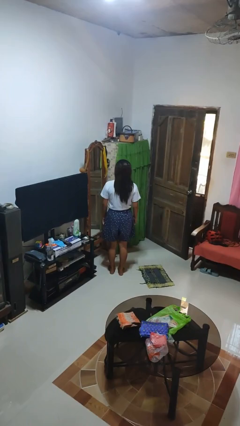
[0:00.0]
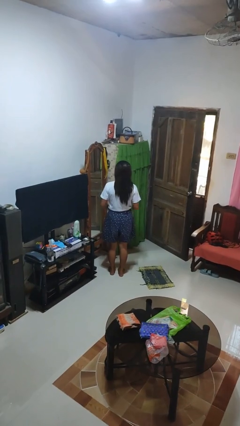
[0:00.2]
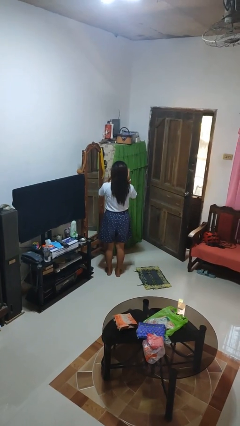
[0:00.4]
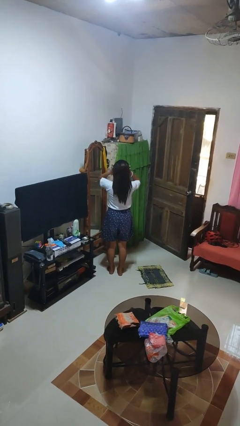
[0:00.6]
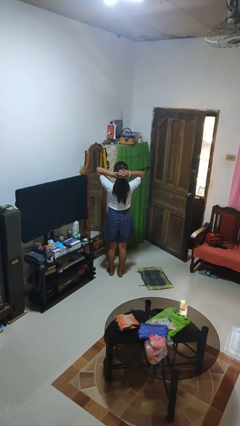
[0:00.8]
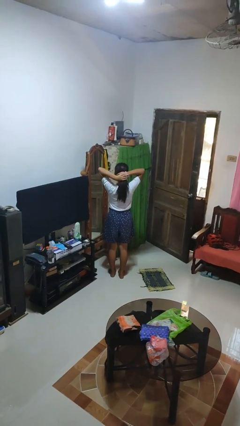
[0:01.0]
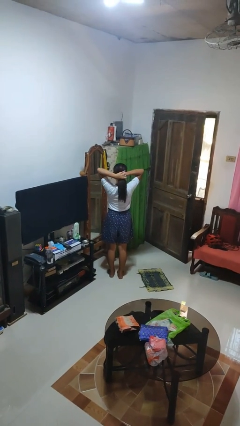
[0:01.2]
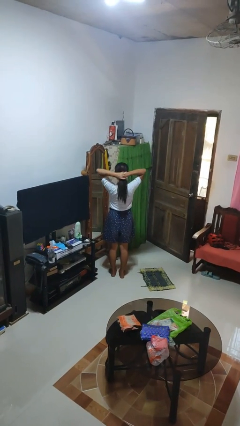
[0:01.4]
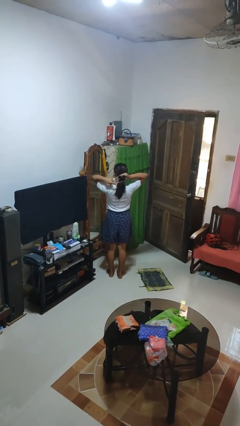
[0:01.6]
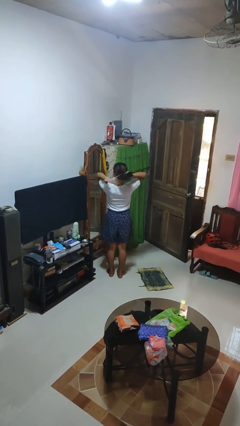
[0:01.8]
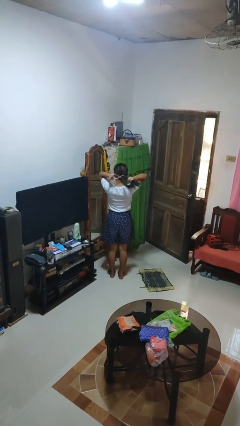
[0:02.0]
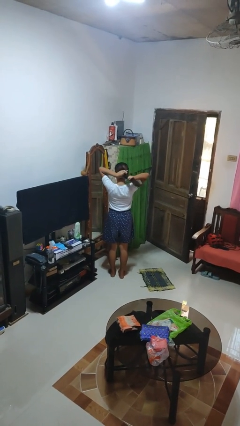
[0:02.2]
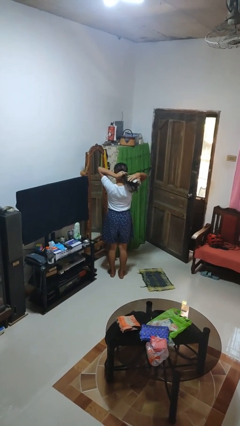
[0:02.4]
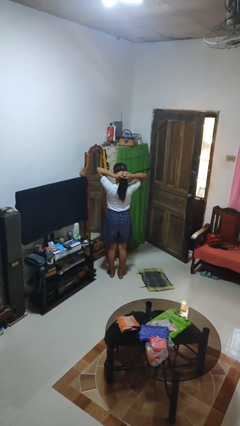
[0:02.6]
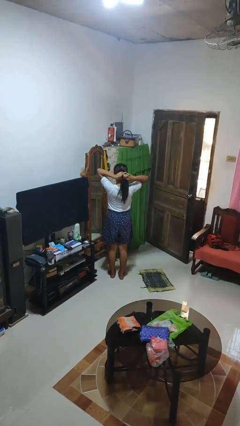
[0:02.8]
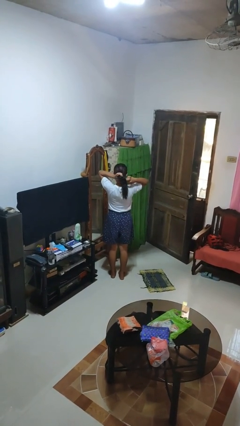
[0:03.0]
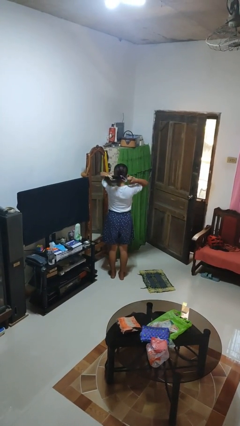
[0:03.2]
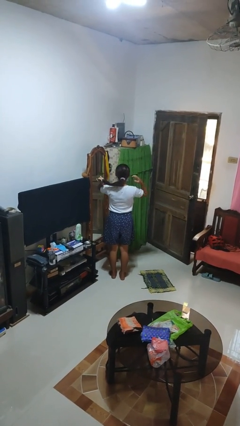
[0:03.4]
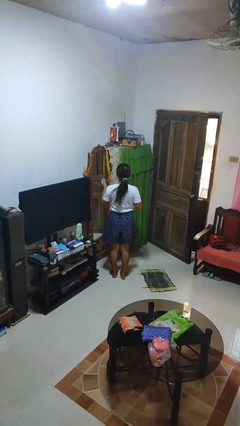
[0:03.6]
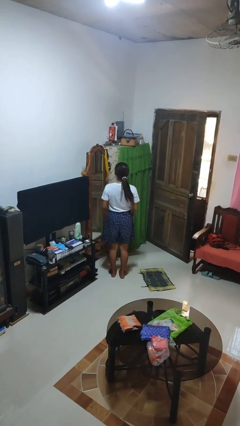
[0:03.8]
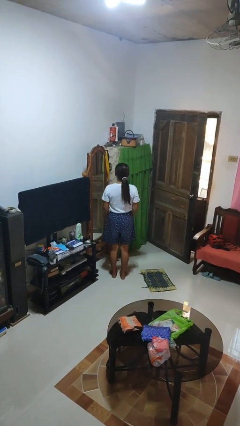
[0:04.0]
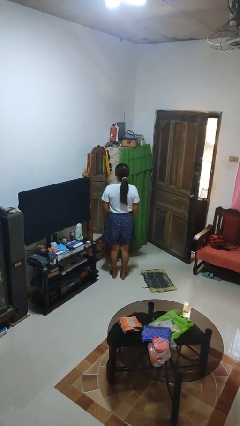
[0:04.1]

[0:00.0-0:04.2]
person puts hair in ponytail

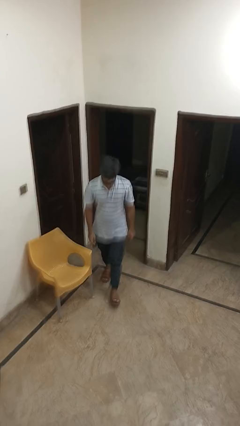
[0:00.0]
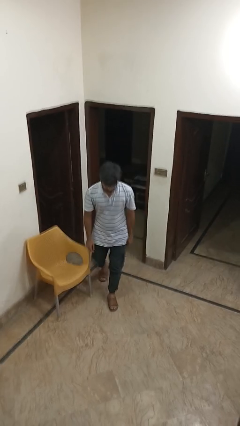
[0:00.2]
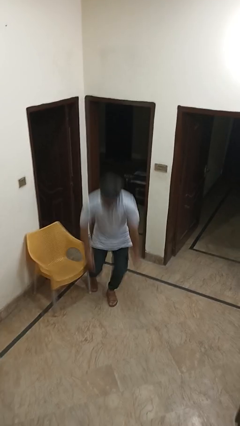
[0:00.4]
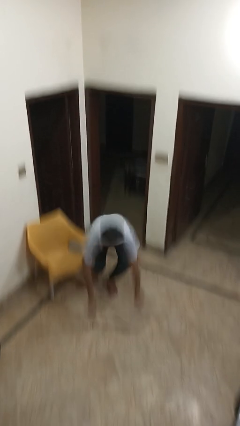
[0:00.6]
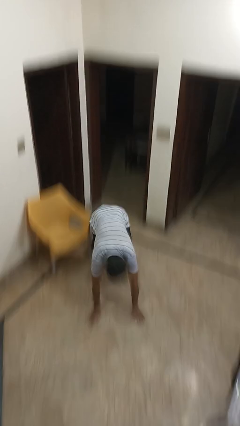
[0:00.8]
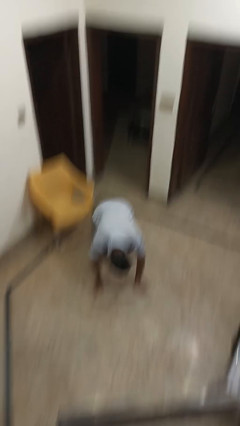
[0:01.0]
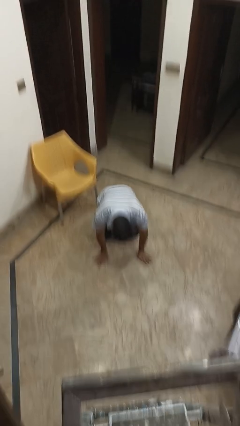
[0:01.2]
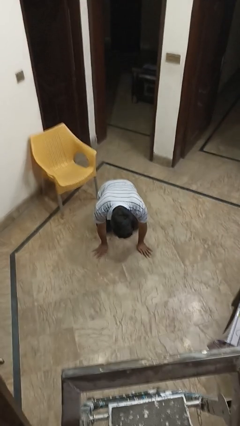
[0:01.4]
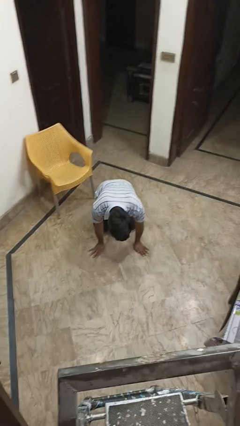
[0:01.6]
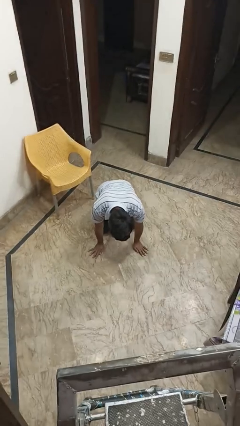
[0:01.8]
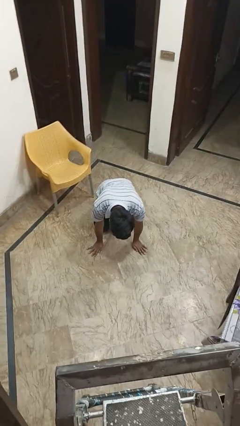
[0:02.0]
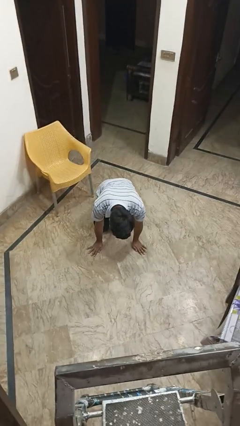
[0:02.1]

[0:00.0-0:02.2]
person trips on object on floor

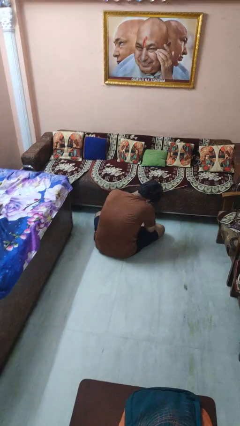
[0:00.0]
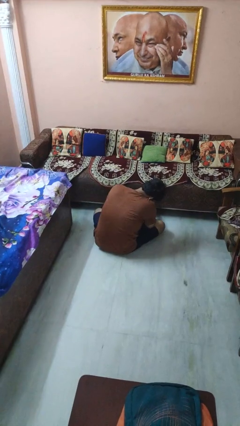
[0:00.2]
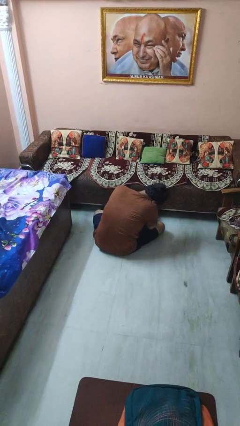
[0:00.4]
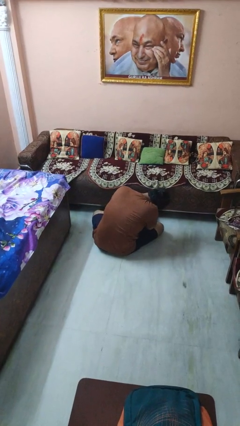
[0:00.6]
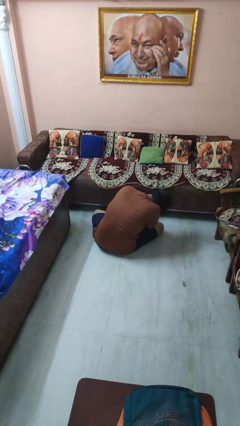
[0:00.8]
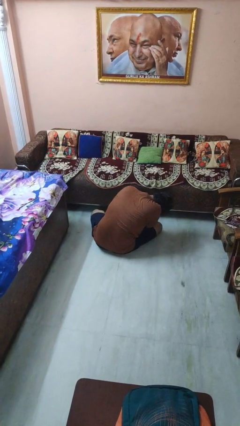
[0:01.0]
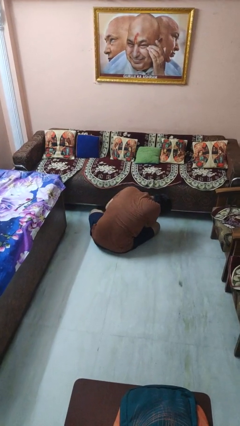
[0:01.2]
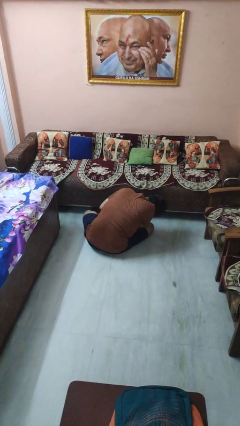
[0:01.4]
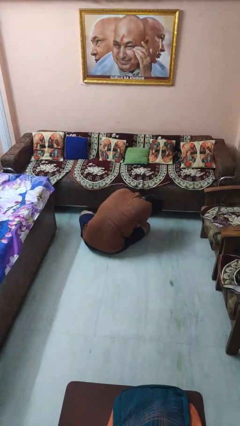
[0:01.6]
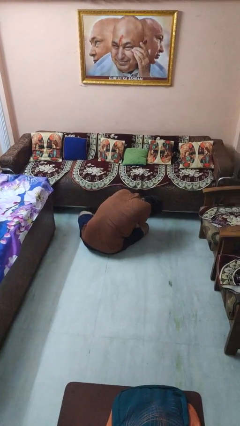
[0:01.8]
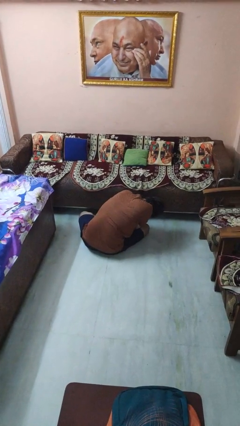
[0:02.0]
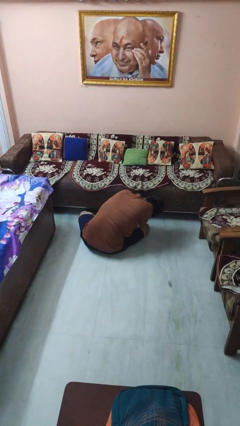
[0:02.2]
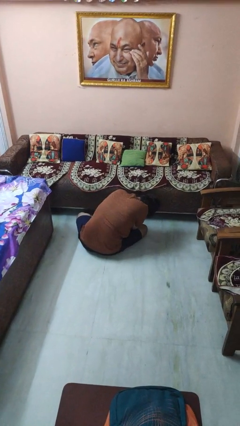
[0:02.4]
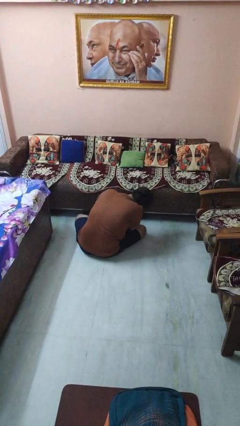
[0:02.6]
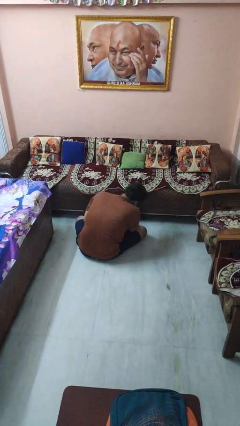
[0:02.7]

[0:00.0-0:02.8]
person searches under couch

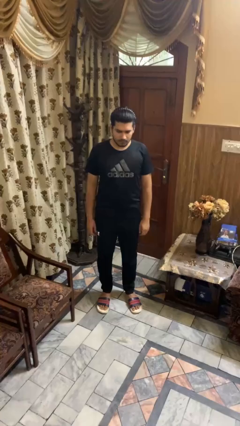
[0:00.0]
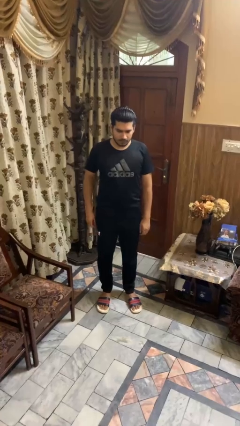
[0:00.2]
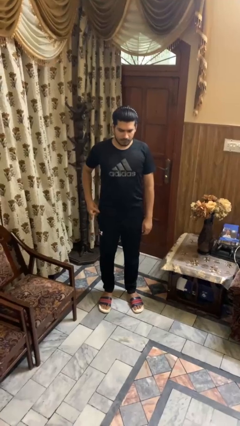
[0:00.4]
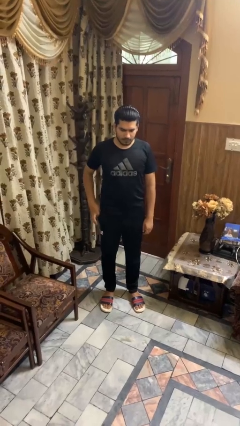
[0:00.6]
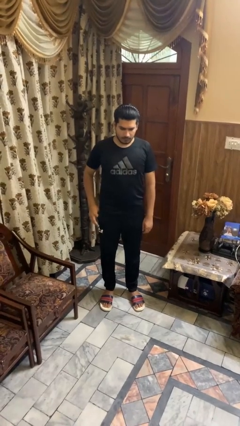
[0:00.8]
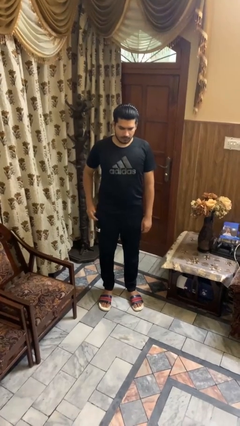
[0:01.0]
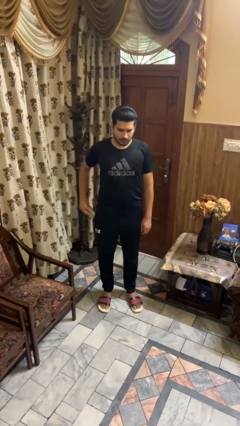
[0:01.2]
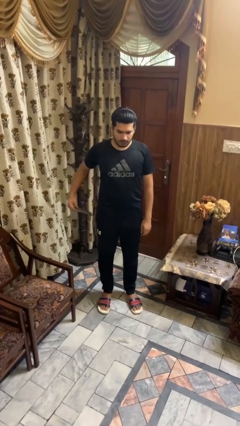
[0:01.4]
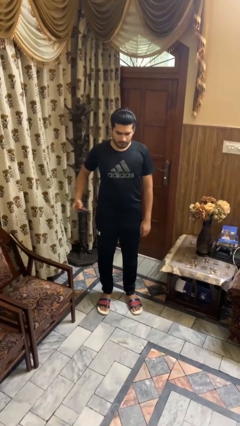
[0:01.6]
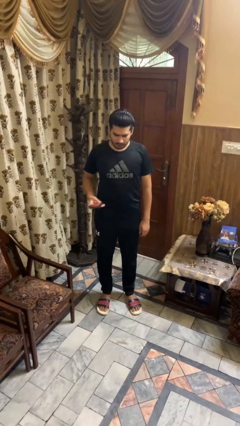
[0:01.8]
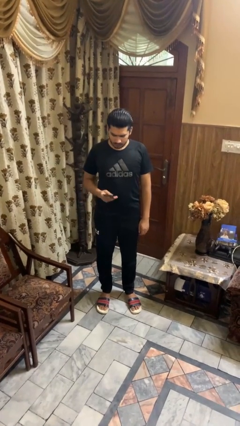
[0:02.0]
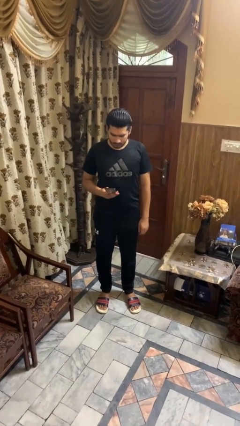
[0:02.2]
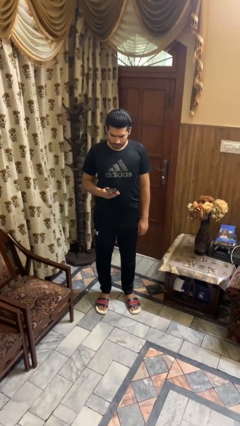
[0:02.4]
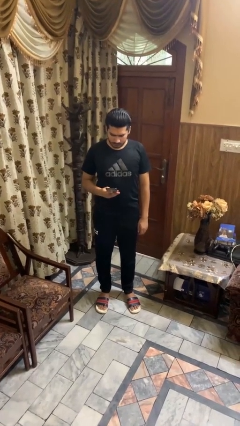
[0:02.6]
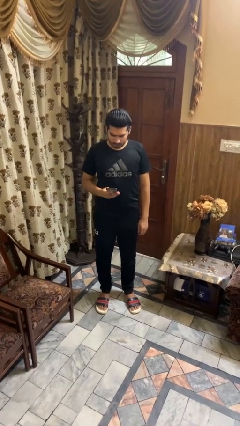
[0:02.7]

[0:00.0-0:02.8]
person takes phone from pocket

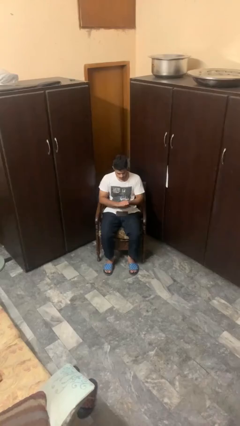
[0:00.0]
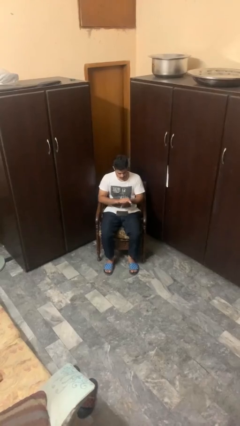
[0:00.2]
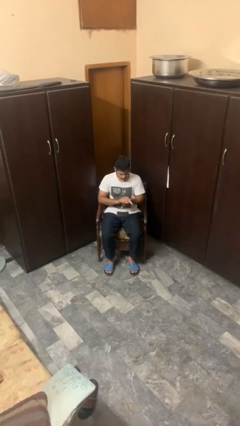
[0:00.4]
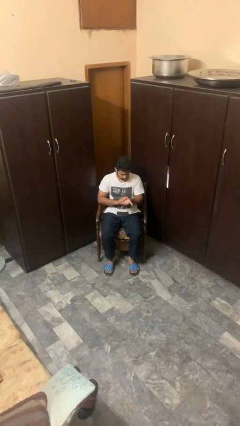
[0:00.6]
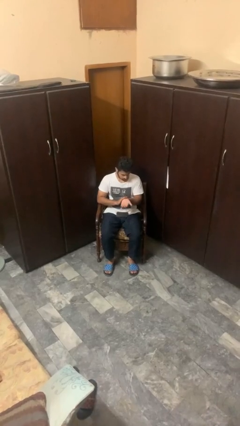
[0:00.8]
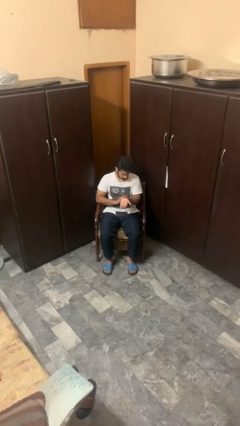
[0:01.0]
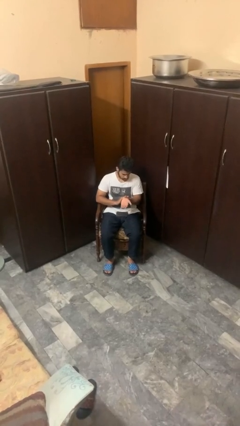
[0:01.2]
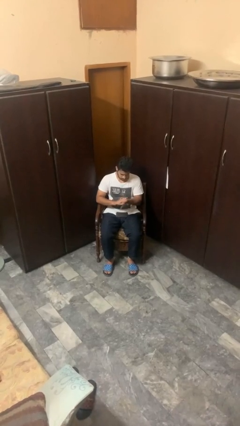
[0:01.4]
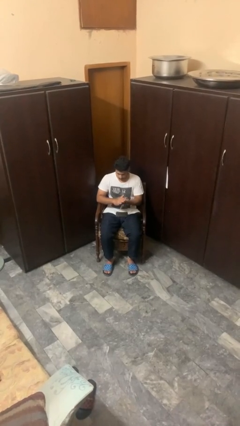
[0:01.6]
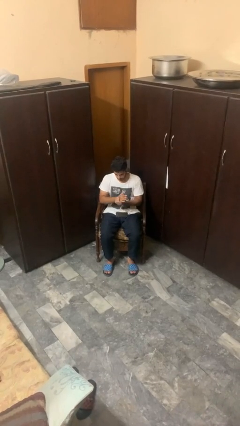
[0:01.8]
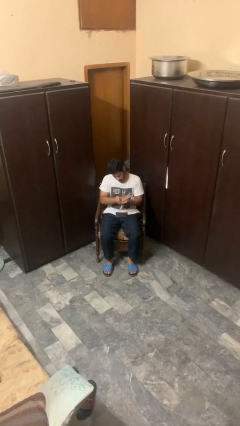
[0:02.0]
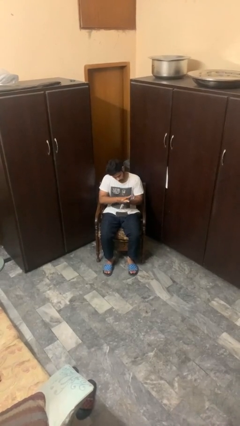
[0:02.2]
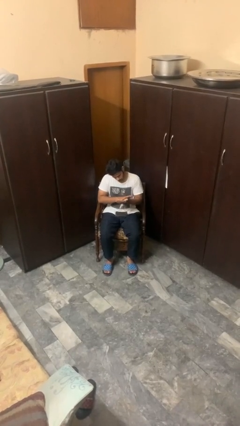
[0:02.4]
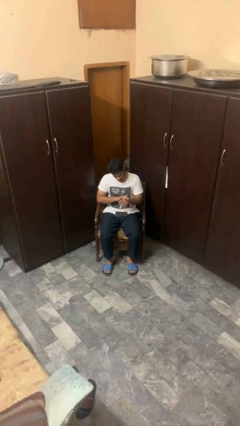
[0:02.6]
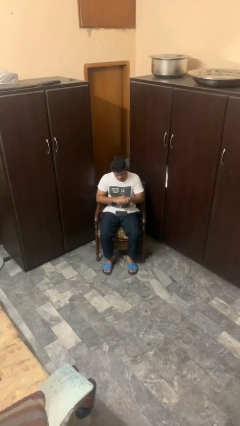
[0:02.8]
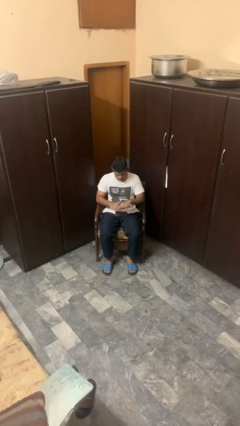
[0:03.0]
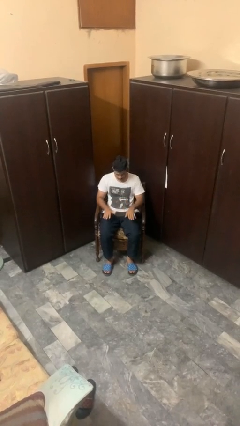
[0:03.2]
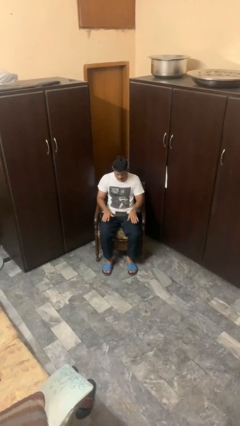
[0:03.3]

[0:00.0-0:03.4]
person looks at hands in lap

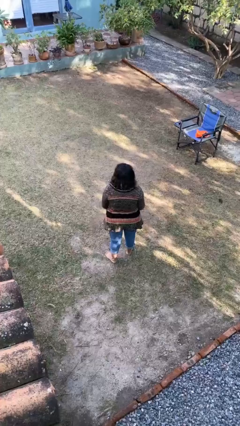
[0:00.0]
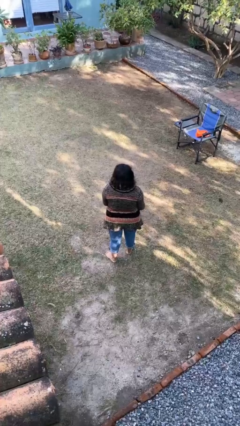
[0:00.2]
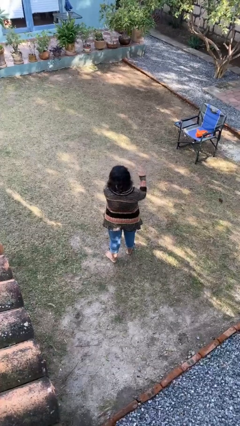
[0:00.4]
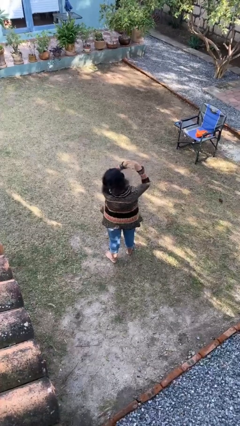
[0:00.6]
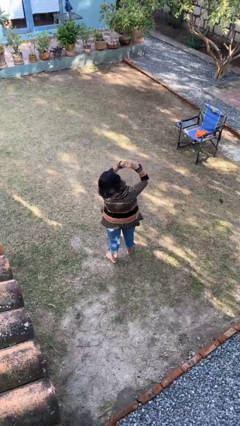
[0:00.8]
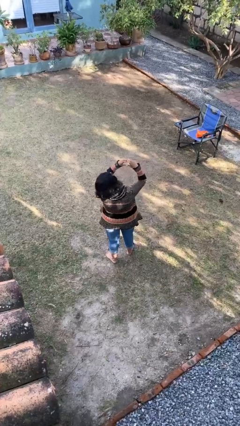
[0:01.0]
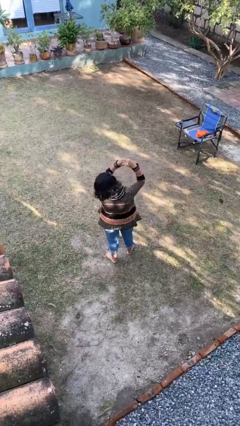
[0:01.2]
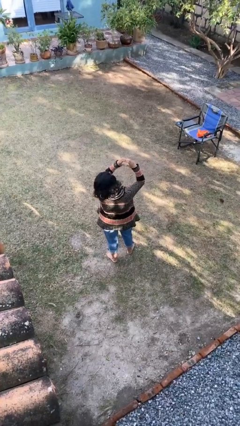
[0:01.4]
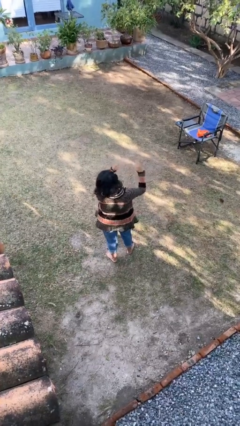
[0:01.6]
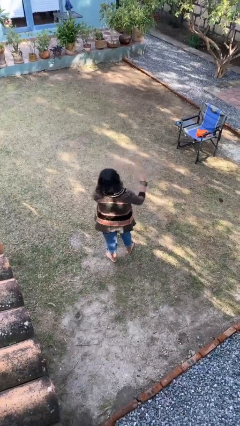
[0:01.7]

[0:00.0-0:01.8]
person gestures heart

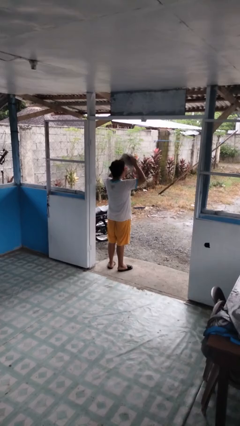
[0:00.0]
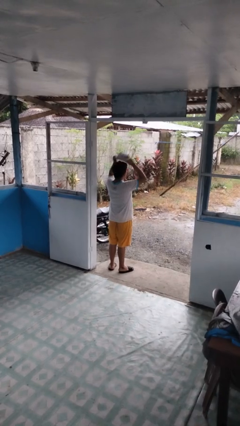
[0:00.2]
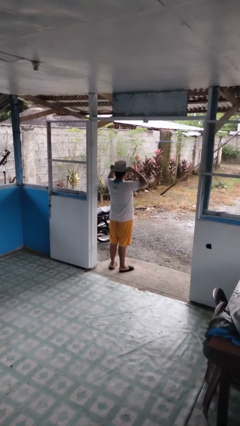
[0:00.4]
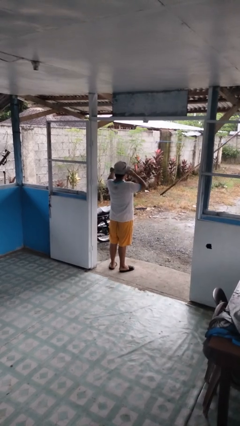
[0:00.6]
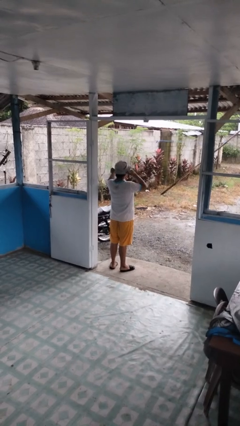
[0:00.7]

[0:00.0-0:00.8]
person puts on hat
